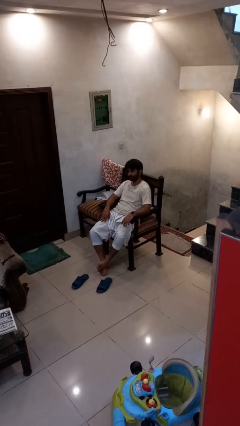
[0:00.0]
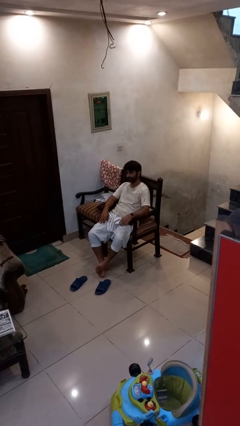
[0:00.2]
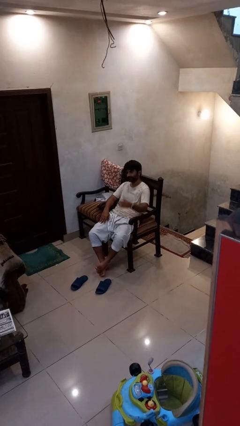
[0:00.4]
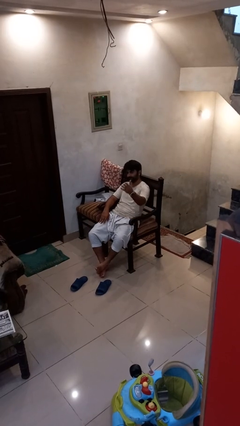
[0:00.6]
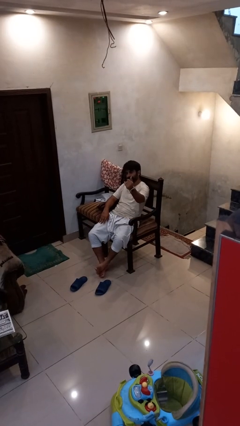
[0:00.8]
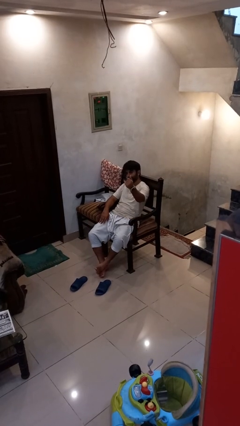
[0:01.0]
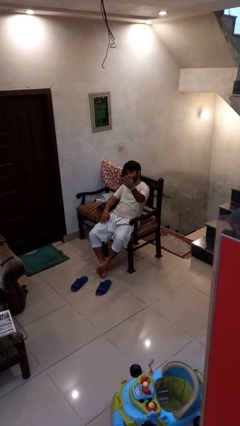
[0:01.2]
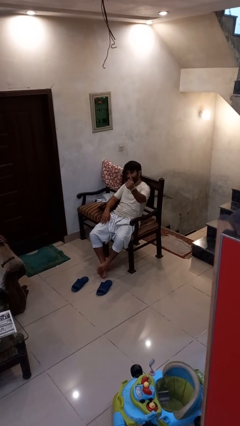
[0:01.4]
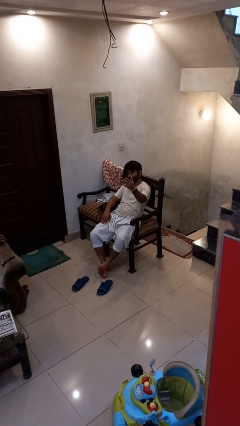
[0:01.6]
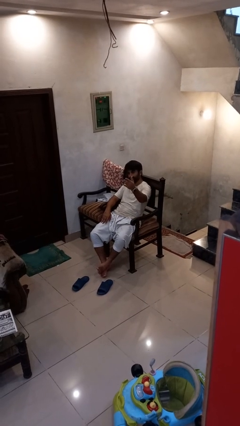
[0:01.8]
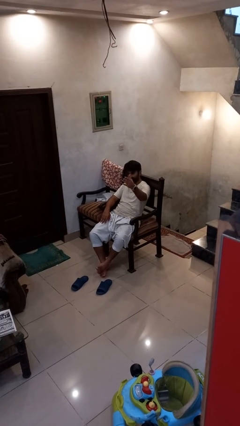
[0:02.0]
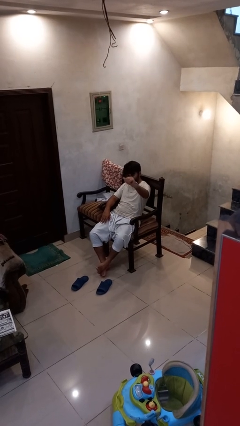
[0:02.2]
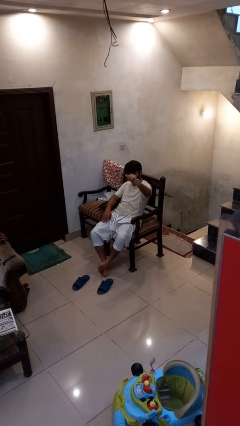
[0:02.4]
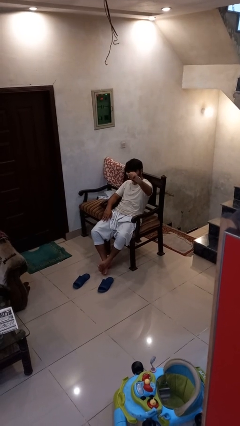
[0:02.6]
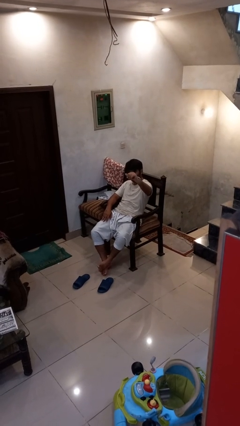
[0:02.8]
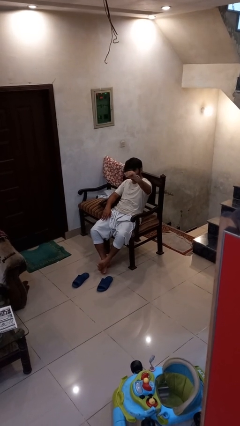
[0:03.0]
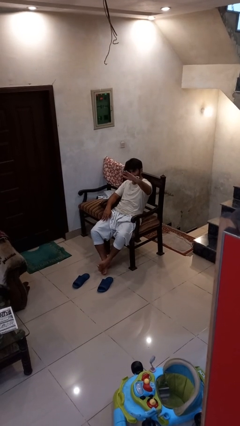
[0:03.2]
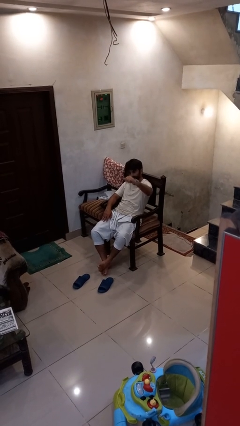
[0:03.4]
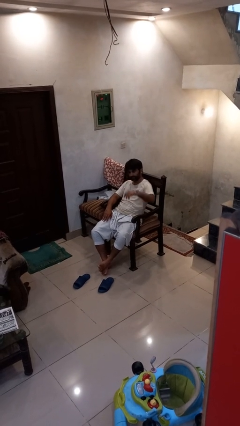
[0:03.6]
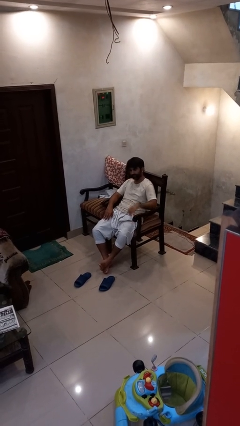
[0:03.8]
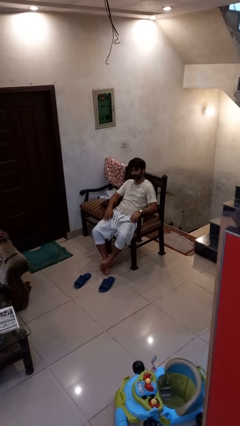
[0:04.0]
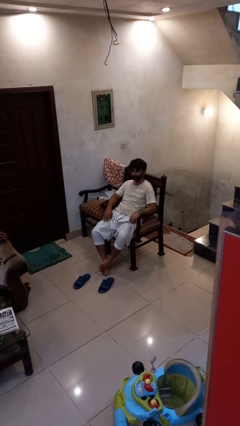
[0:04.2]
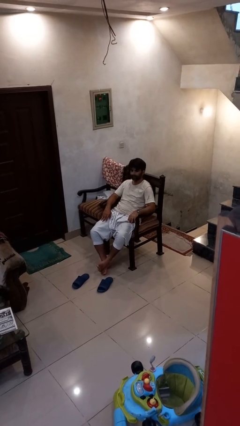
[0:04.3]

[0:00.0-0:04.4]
person gestures come here

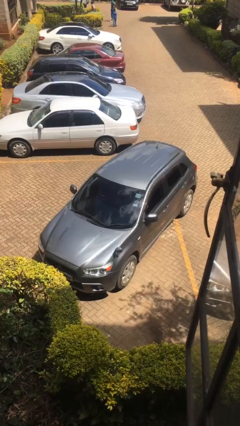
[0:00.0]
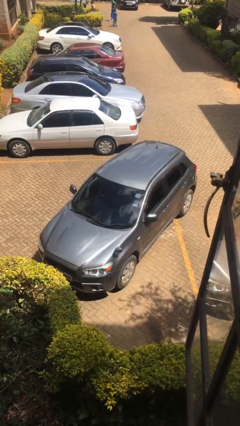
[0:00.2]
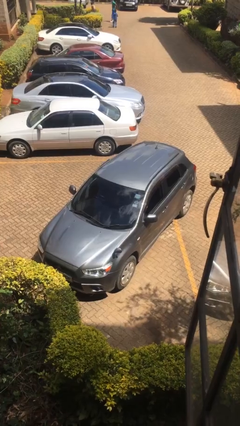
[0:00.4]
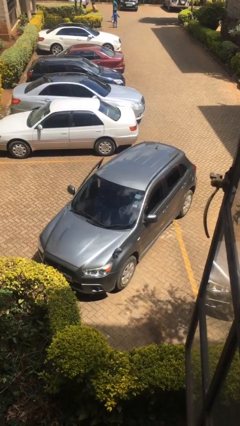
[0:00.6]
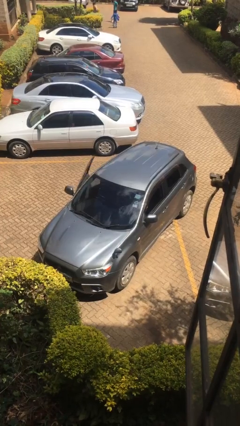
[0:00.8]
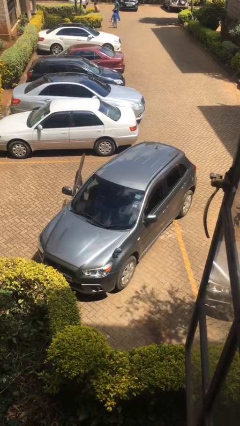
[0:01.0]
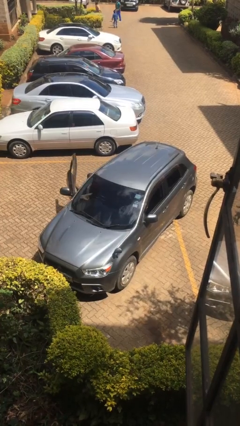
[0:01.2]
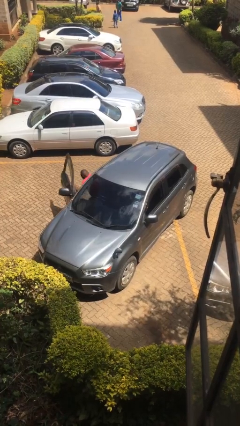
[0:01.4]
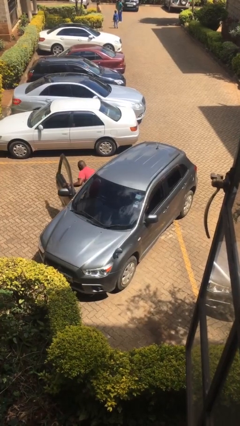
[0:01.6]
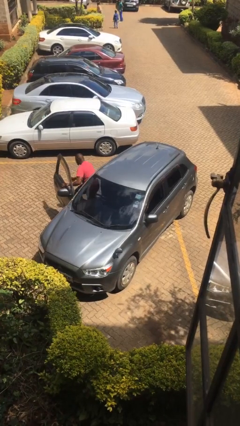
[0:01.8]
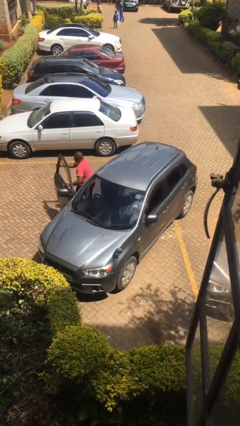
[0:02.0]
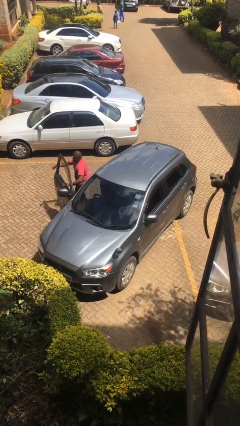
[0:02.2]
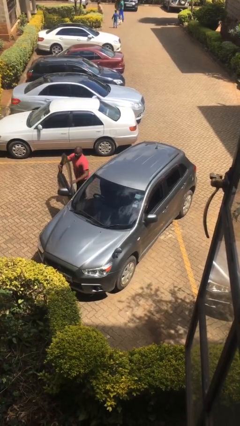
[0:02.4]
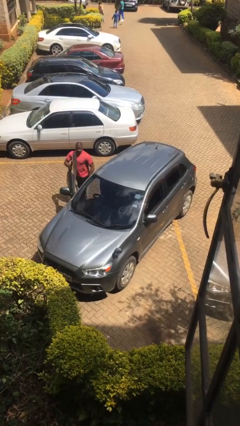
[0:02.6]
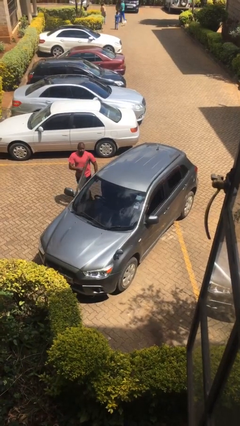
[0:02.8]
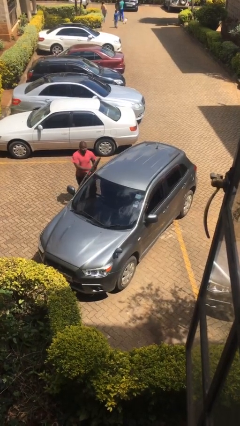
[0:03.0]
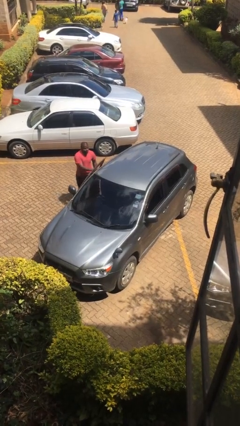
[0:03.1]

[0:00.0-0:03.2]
car drops off person

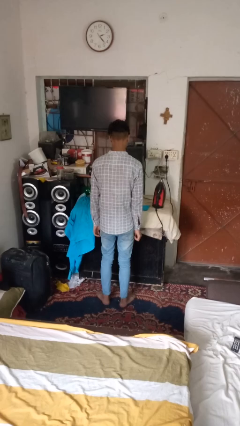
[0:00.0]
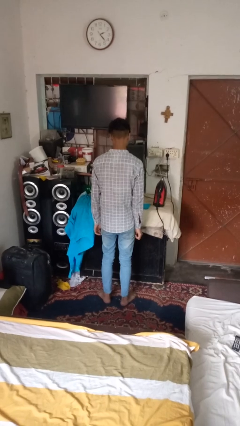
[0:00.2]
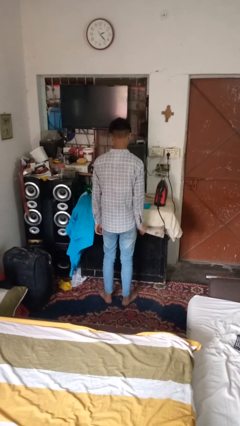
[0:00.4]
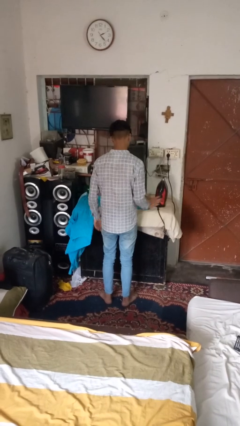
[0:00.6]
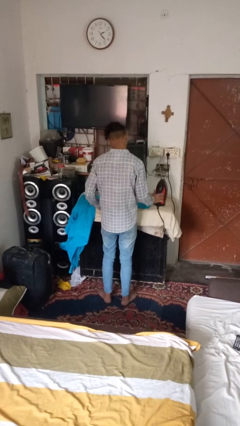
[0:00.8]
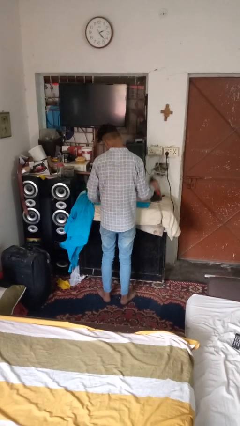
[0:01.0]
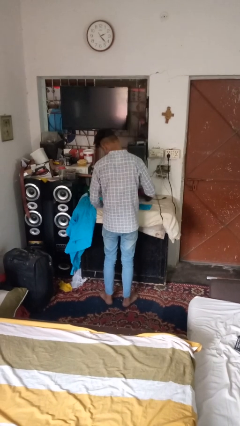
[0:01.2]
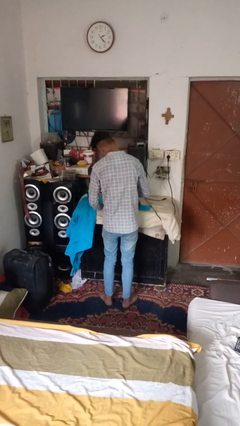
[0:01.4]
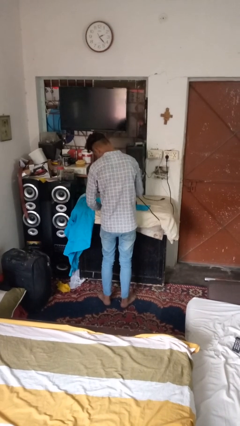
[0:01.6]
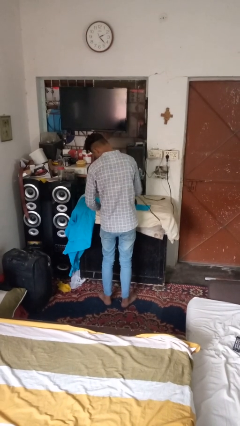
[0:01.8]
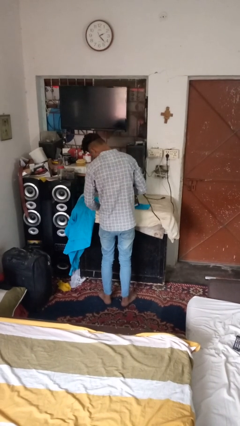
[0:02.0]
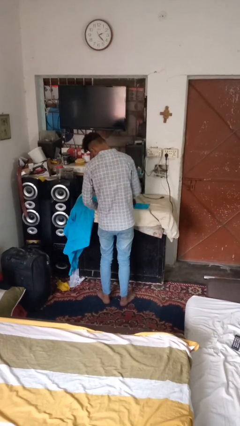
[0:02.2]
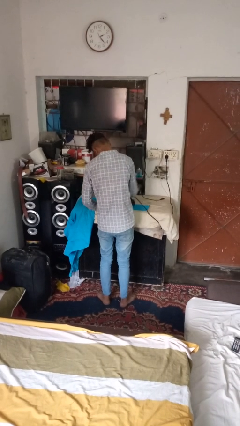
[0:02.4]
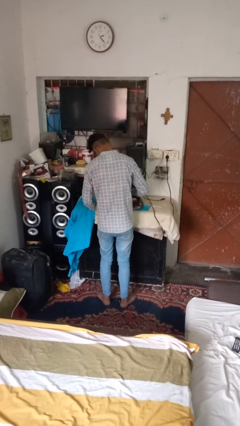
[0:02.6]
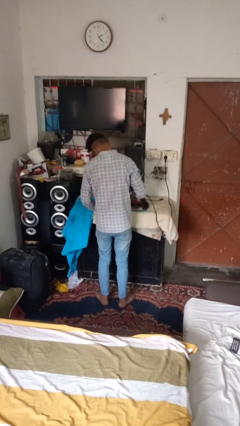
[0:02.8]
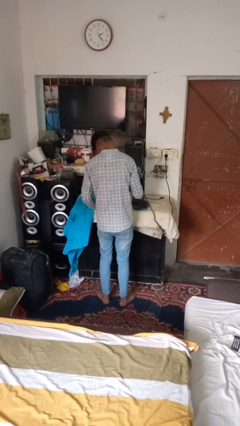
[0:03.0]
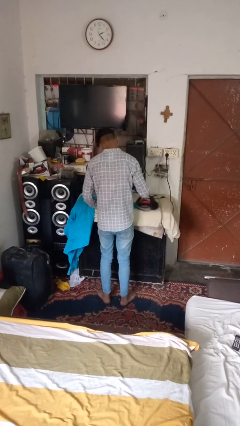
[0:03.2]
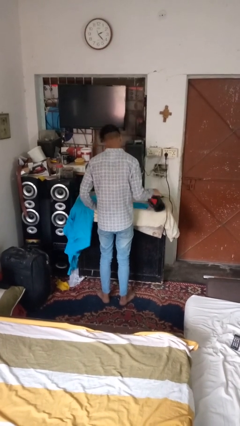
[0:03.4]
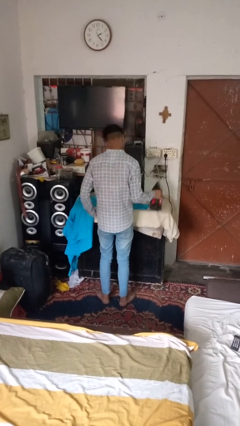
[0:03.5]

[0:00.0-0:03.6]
person irons clothes

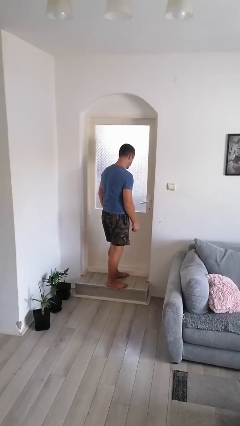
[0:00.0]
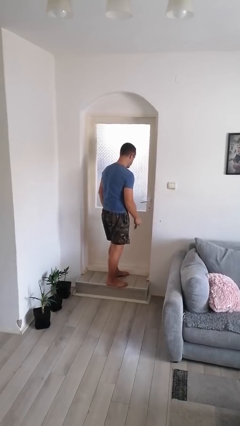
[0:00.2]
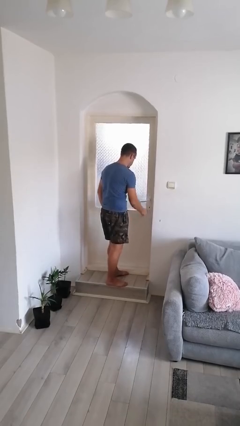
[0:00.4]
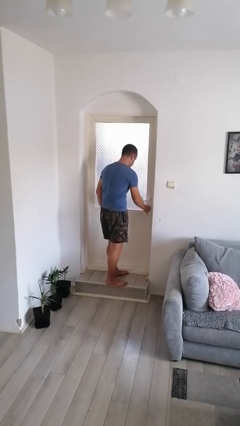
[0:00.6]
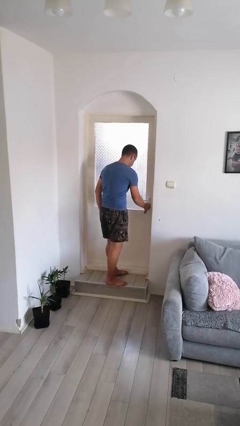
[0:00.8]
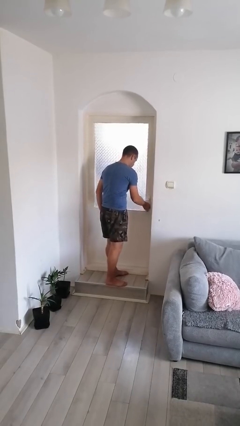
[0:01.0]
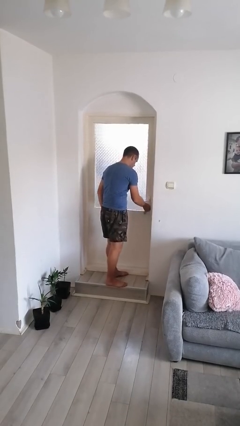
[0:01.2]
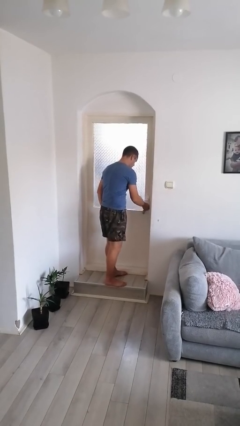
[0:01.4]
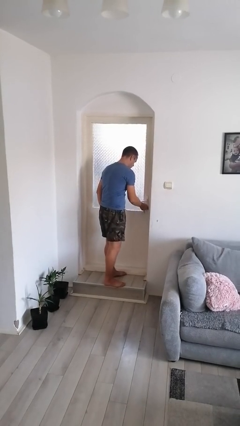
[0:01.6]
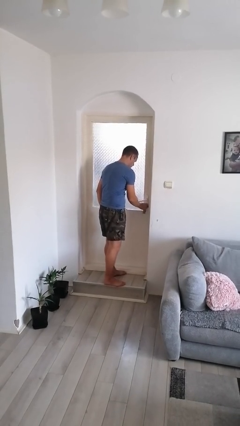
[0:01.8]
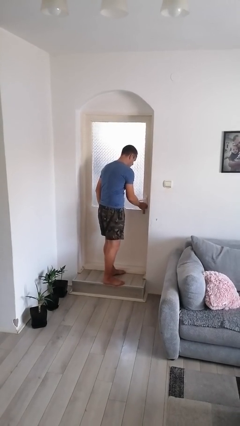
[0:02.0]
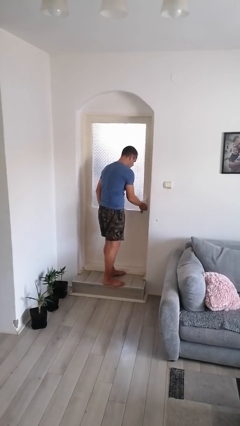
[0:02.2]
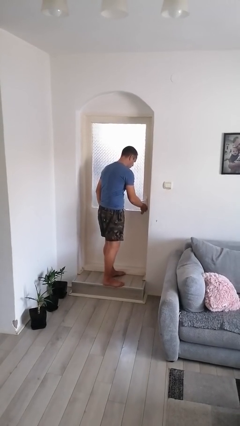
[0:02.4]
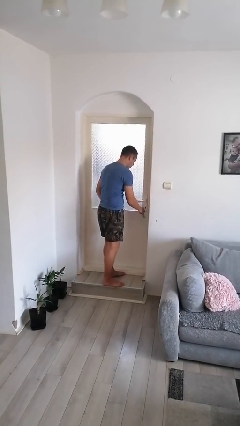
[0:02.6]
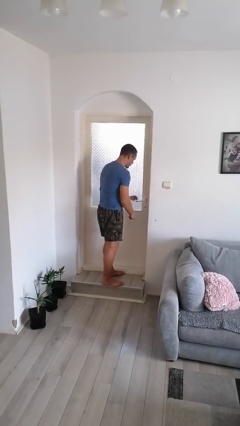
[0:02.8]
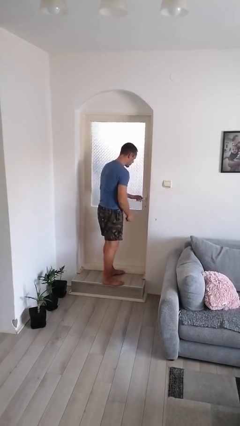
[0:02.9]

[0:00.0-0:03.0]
person unlocks door with keys

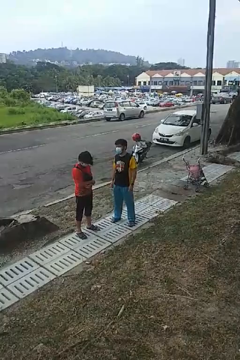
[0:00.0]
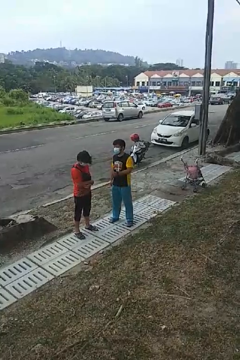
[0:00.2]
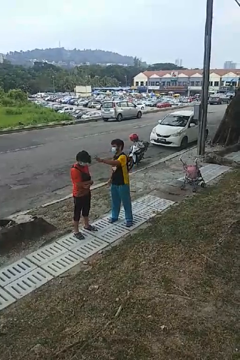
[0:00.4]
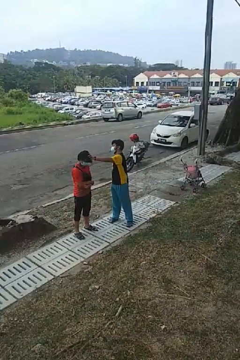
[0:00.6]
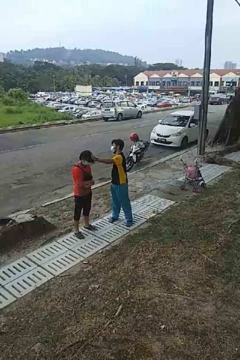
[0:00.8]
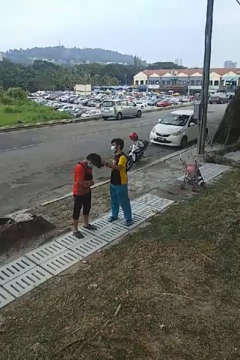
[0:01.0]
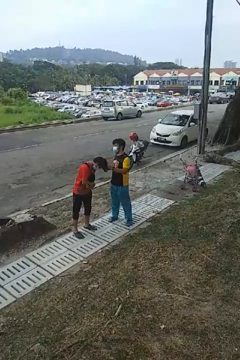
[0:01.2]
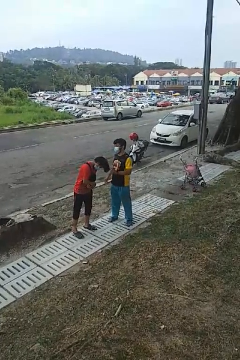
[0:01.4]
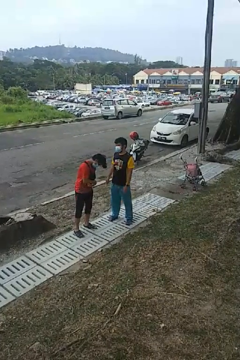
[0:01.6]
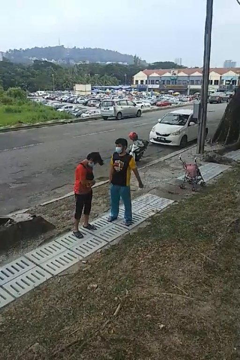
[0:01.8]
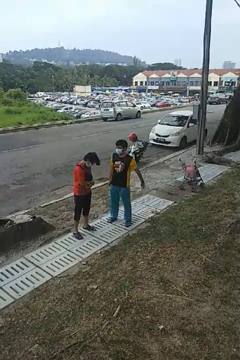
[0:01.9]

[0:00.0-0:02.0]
person grabs person by hair

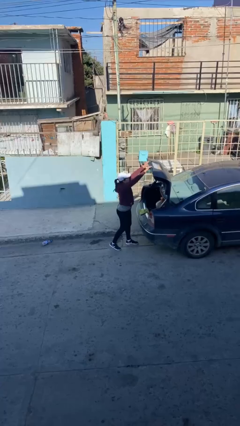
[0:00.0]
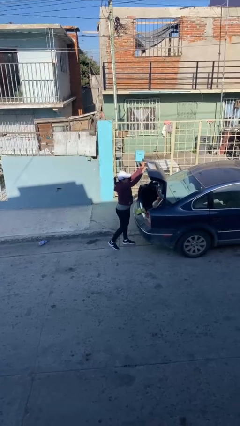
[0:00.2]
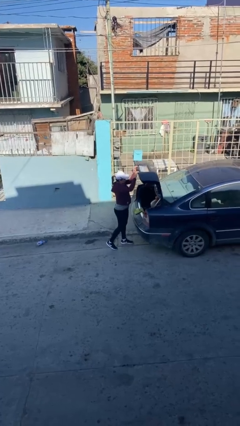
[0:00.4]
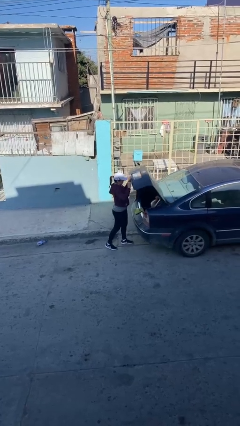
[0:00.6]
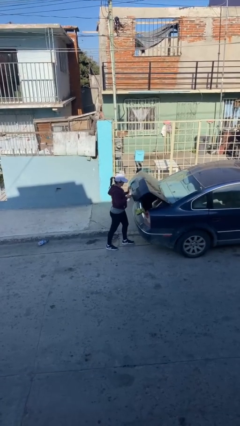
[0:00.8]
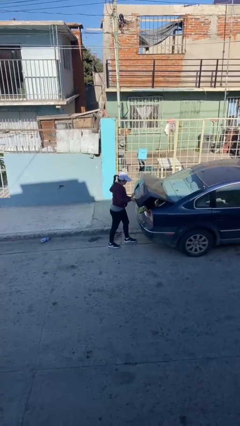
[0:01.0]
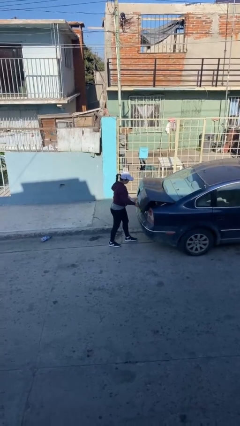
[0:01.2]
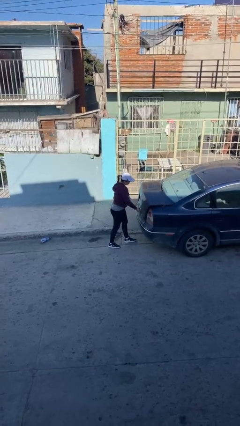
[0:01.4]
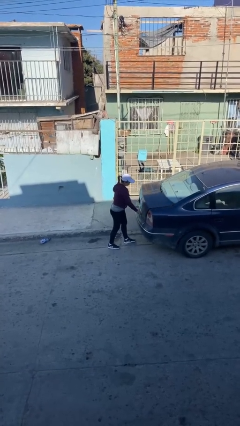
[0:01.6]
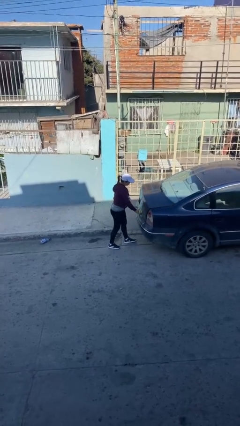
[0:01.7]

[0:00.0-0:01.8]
person closes car trunk
